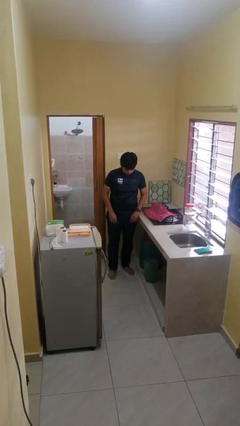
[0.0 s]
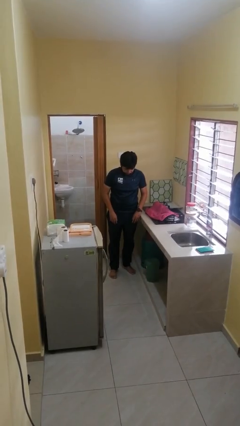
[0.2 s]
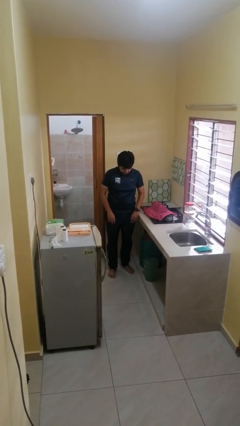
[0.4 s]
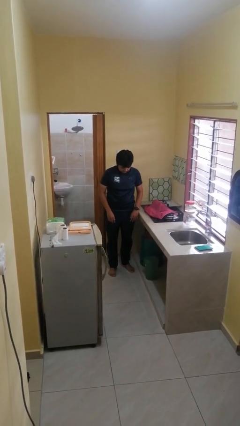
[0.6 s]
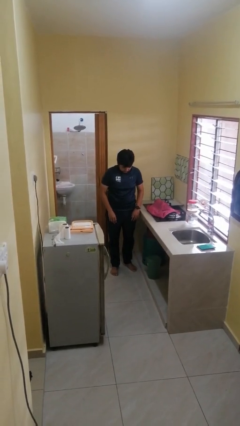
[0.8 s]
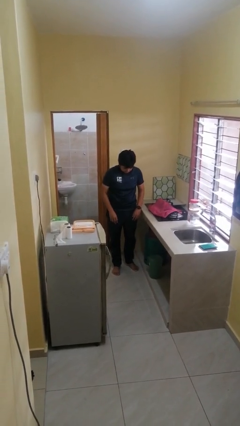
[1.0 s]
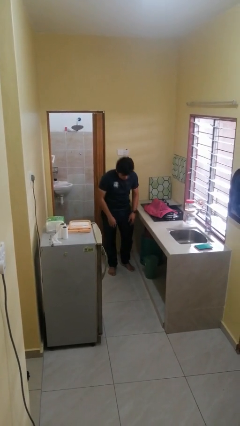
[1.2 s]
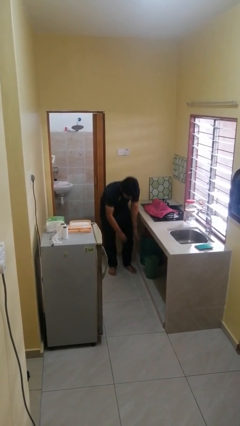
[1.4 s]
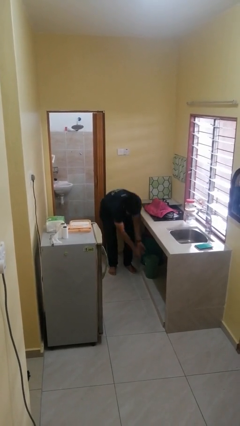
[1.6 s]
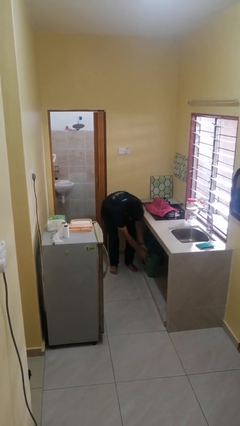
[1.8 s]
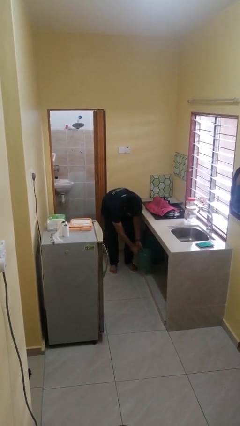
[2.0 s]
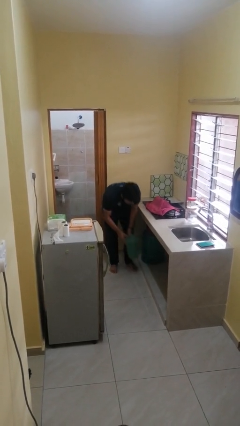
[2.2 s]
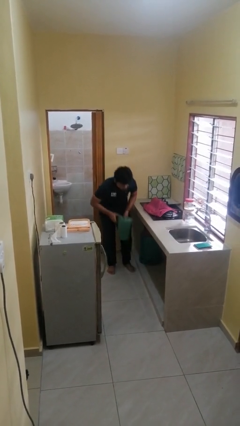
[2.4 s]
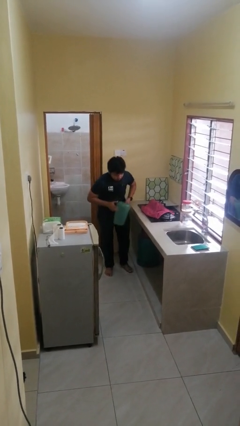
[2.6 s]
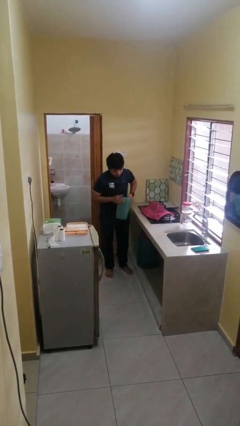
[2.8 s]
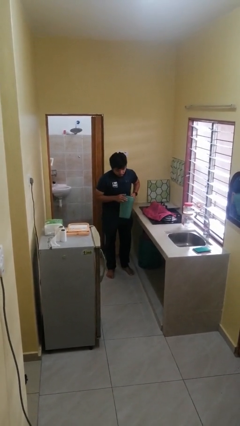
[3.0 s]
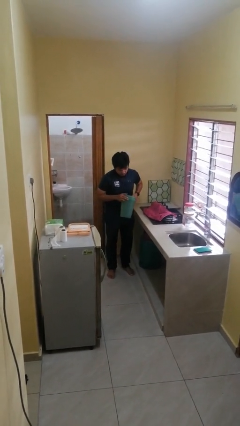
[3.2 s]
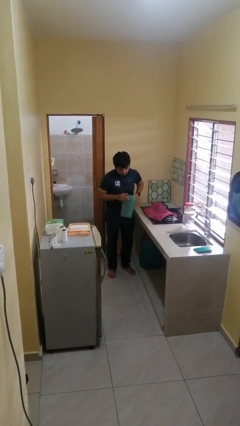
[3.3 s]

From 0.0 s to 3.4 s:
person picks up object from cabinet

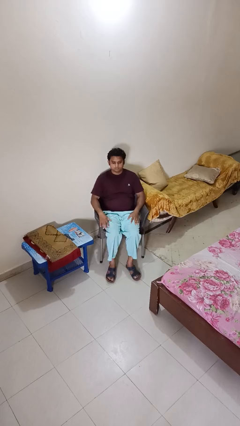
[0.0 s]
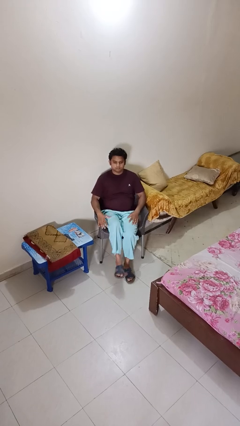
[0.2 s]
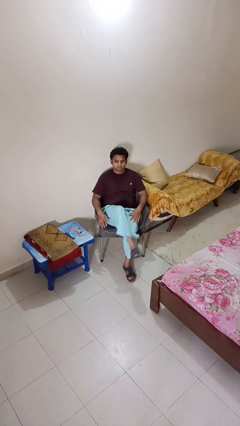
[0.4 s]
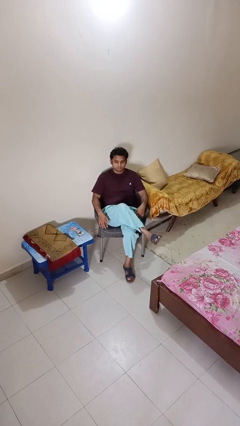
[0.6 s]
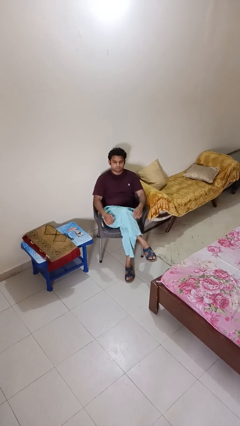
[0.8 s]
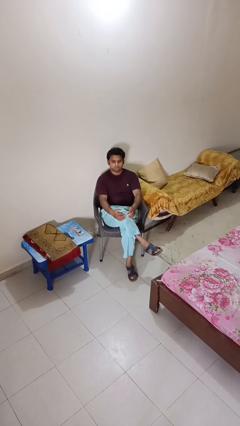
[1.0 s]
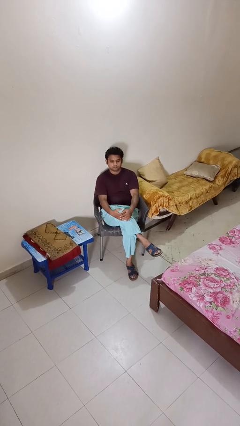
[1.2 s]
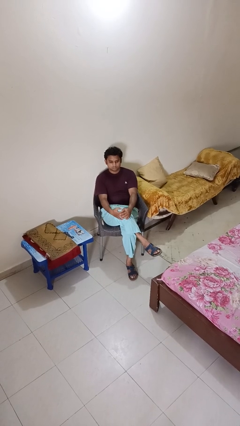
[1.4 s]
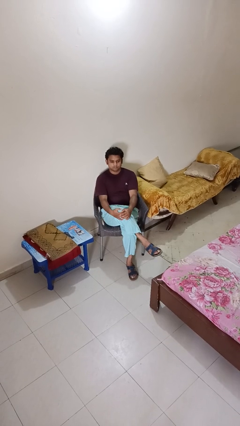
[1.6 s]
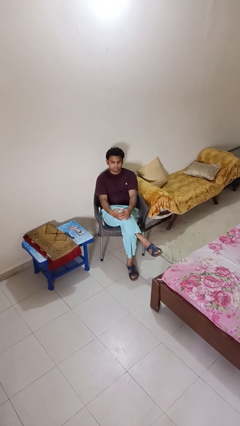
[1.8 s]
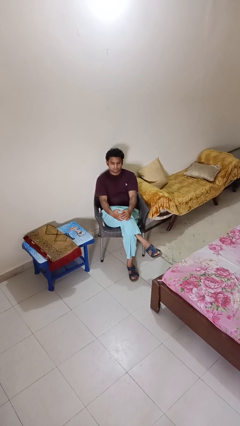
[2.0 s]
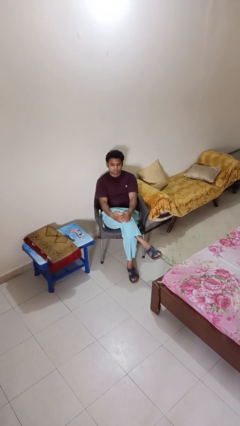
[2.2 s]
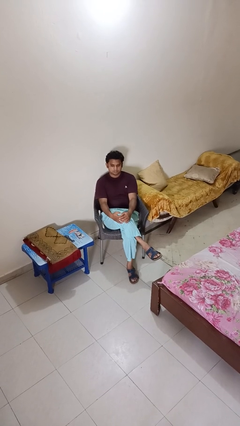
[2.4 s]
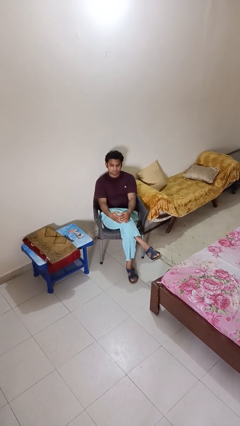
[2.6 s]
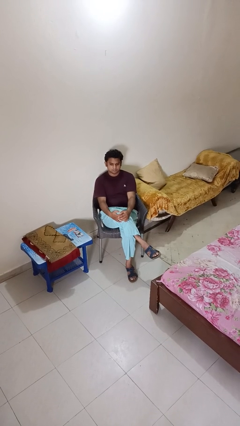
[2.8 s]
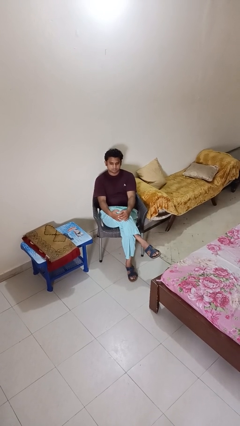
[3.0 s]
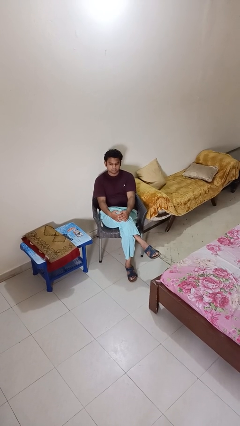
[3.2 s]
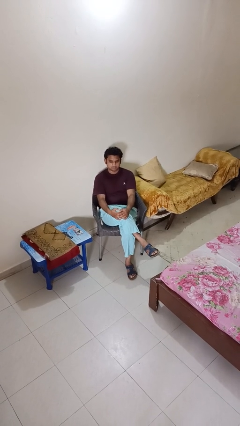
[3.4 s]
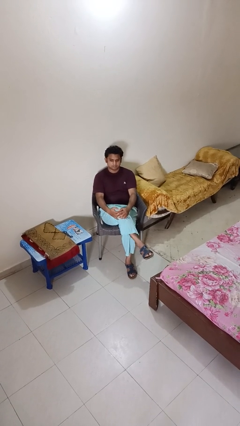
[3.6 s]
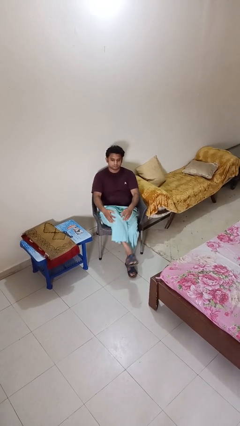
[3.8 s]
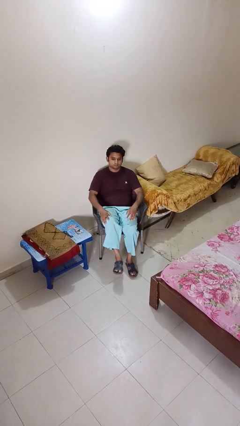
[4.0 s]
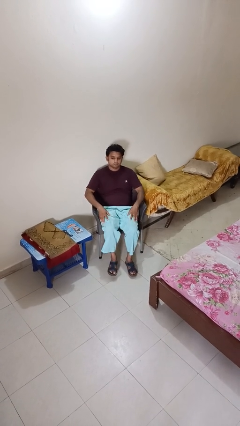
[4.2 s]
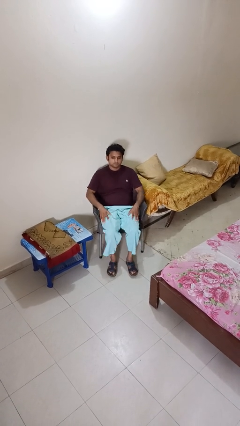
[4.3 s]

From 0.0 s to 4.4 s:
person crosses legs

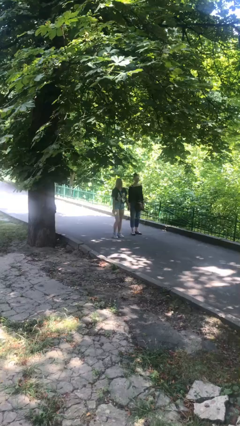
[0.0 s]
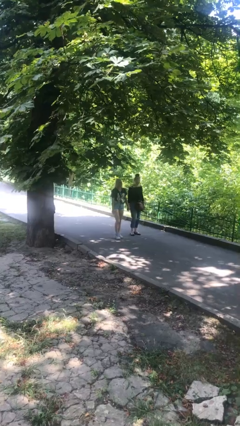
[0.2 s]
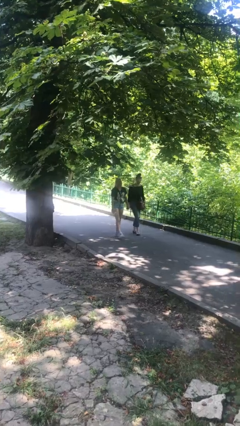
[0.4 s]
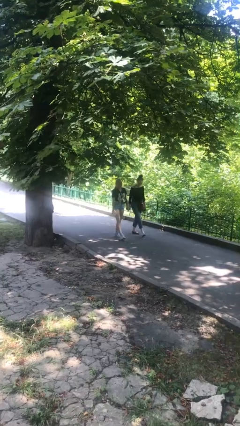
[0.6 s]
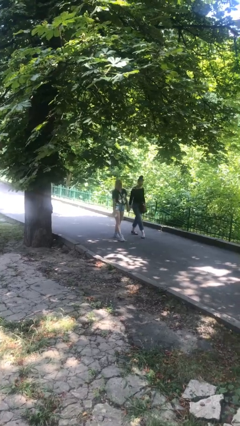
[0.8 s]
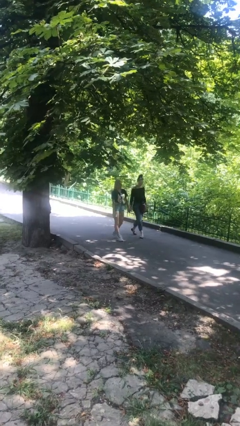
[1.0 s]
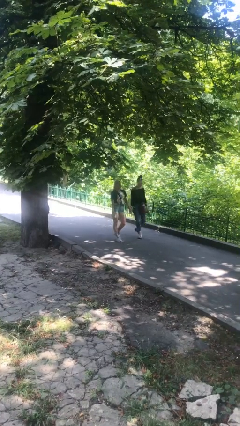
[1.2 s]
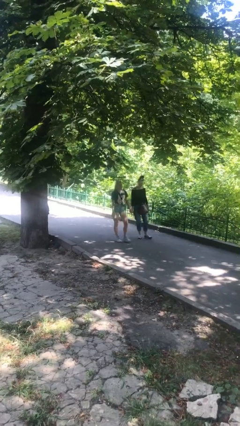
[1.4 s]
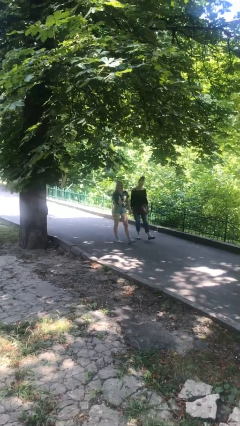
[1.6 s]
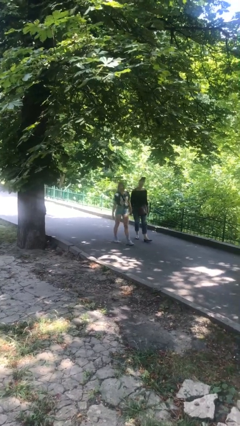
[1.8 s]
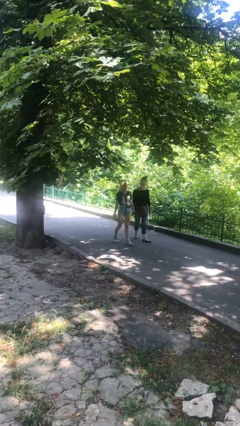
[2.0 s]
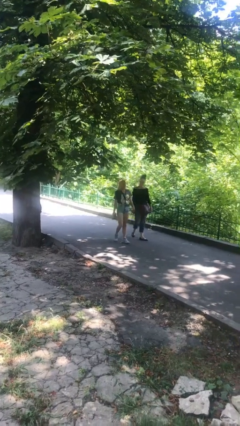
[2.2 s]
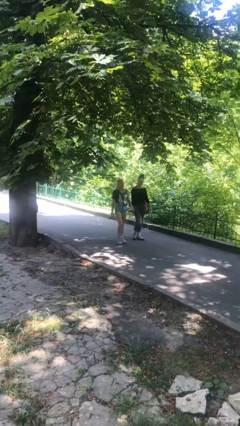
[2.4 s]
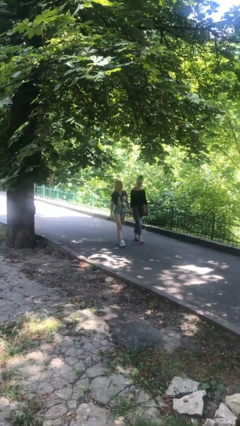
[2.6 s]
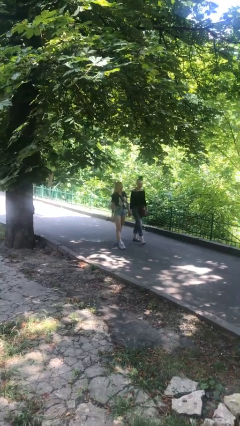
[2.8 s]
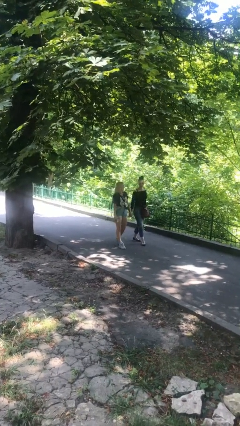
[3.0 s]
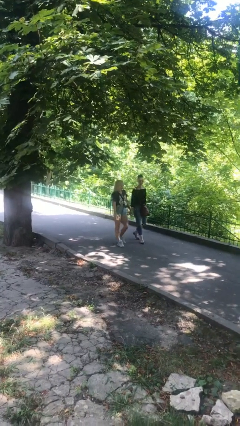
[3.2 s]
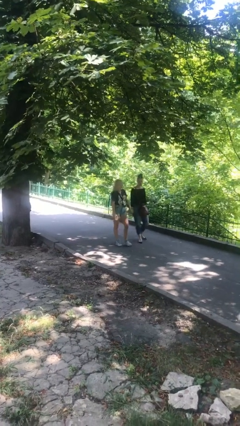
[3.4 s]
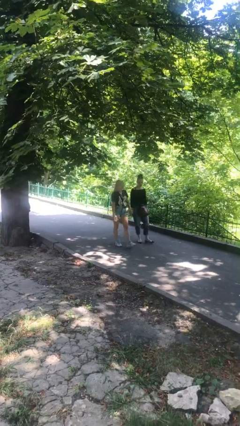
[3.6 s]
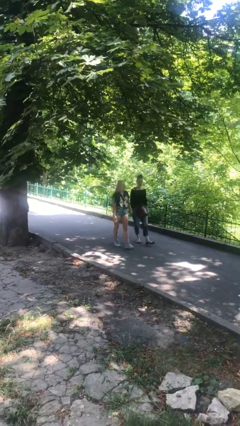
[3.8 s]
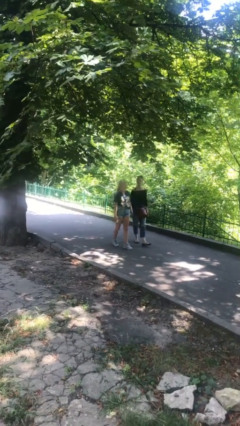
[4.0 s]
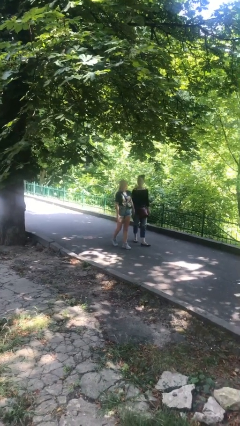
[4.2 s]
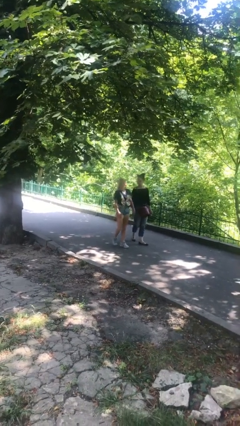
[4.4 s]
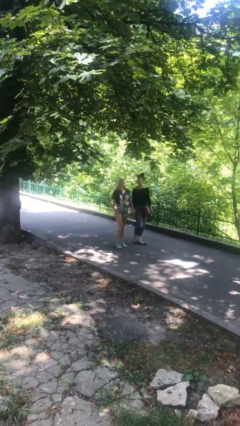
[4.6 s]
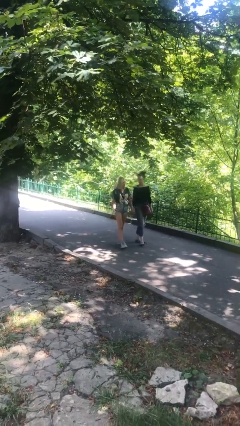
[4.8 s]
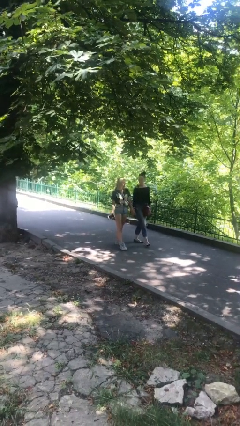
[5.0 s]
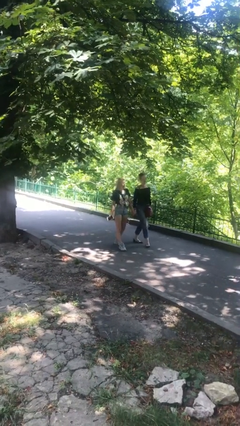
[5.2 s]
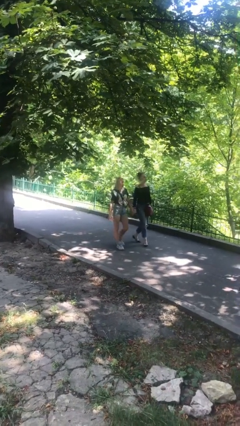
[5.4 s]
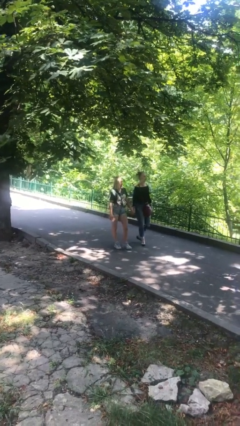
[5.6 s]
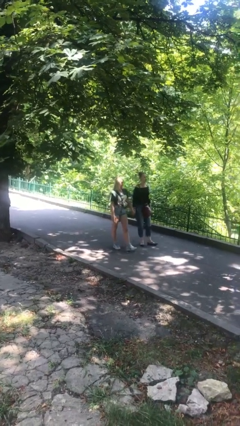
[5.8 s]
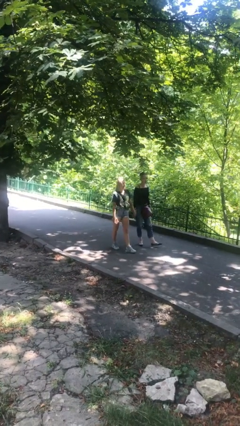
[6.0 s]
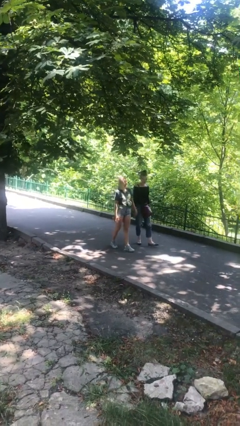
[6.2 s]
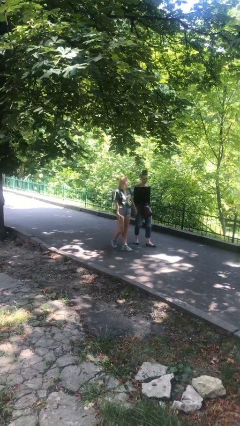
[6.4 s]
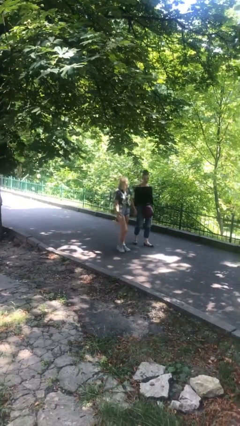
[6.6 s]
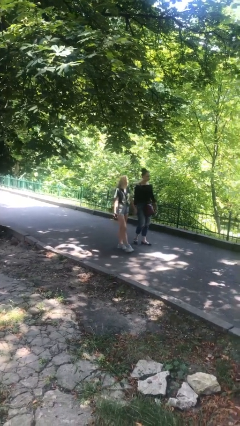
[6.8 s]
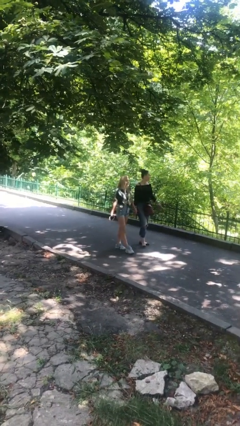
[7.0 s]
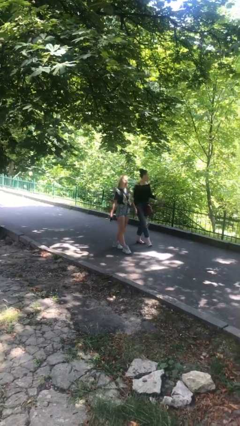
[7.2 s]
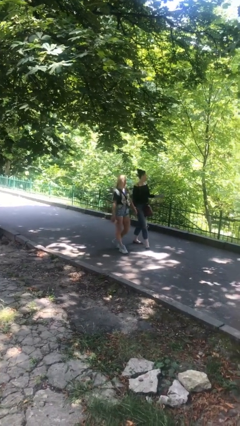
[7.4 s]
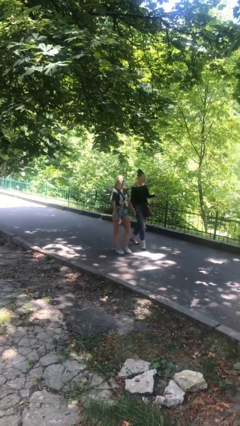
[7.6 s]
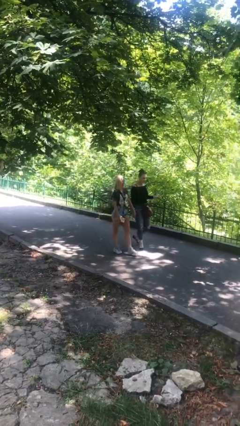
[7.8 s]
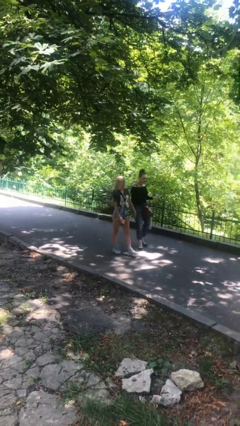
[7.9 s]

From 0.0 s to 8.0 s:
person holds hand

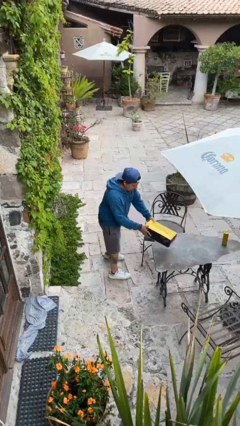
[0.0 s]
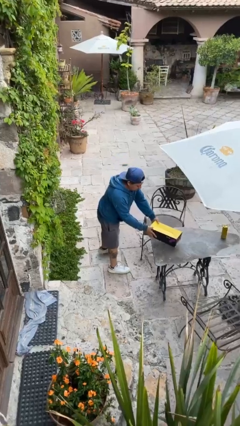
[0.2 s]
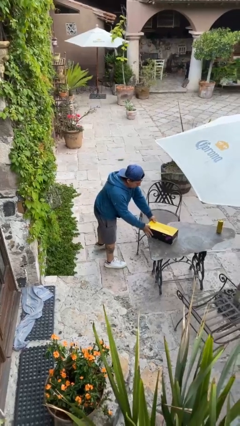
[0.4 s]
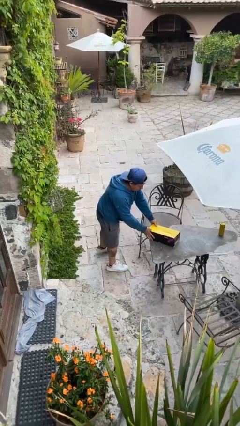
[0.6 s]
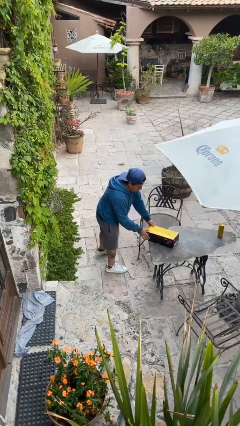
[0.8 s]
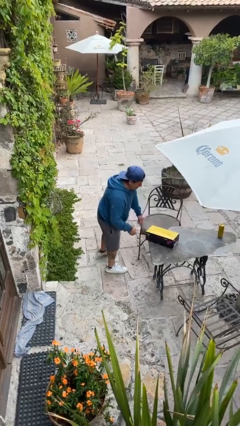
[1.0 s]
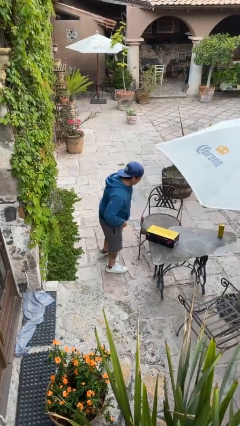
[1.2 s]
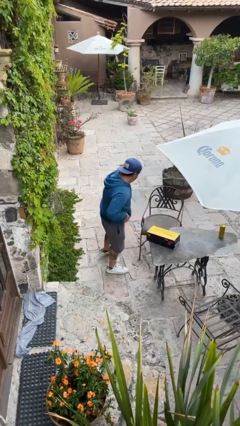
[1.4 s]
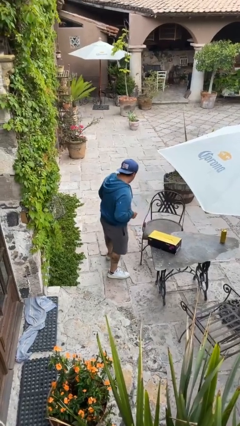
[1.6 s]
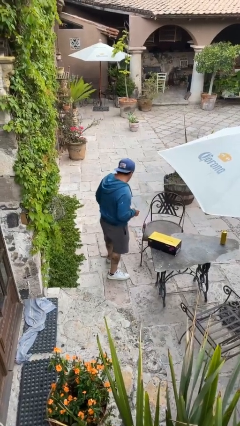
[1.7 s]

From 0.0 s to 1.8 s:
person puts down object on table
